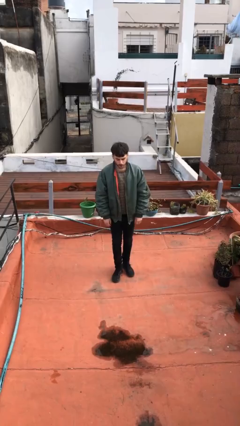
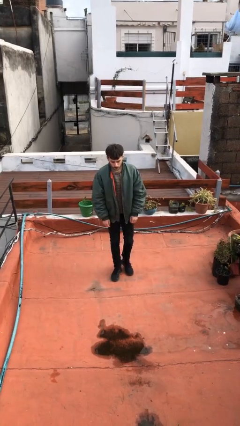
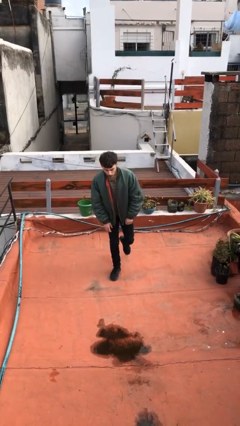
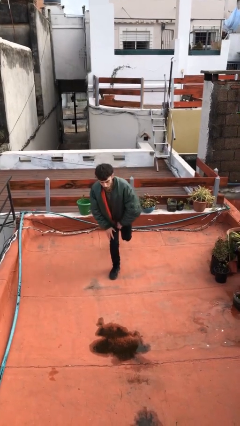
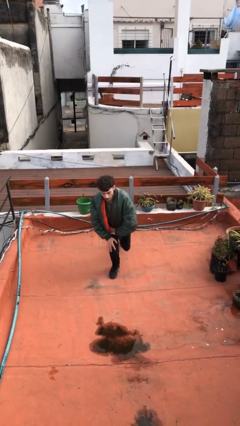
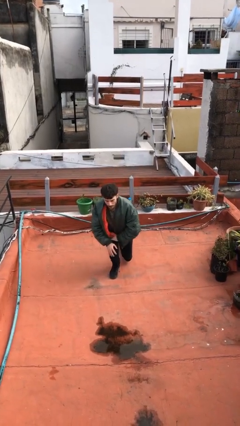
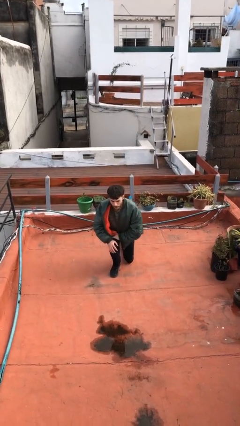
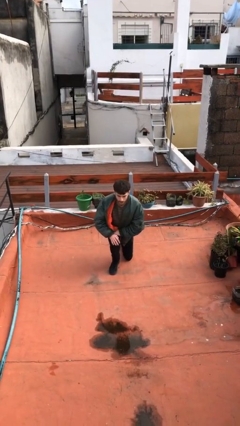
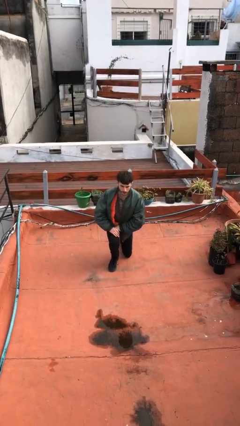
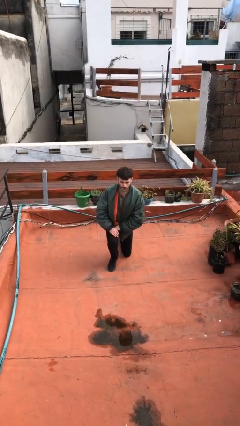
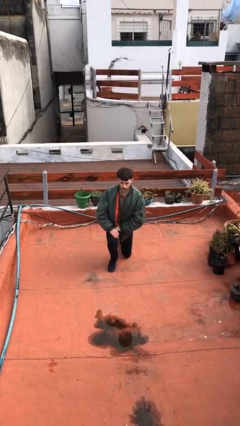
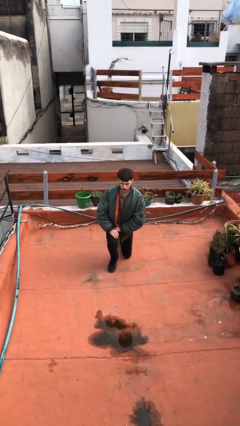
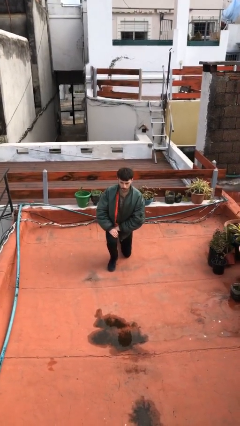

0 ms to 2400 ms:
person kneels

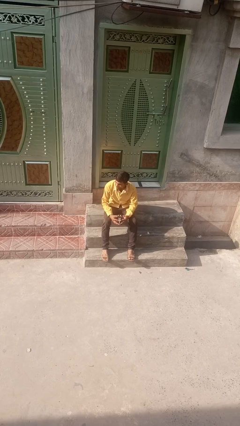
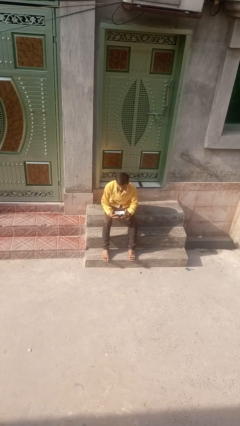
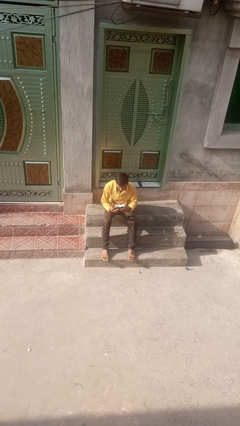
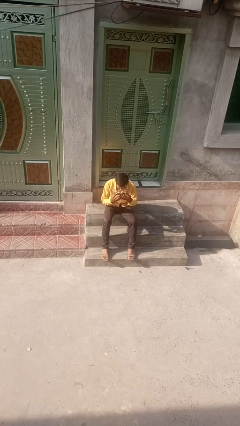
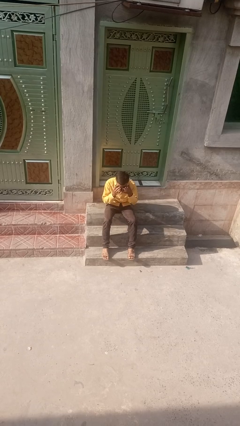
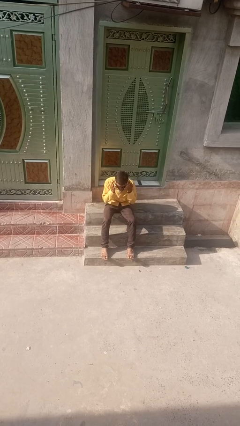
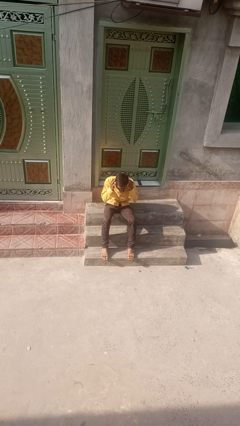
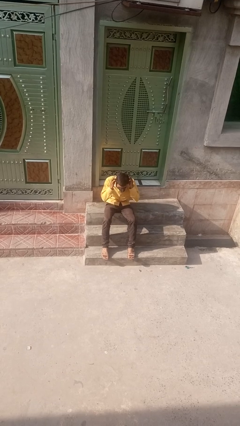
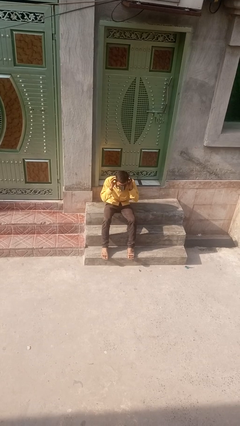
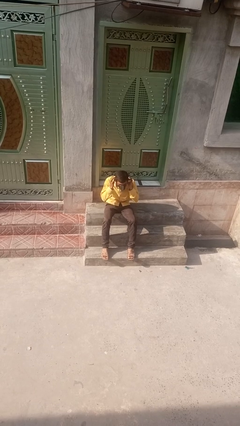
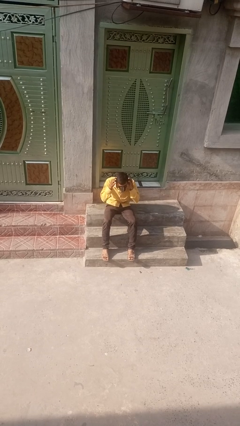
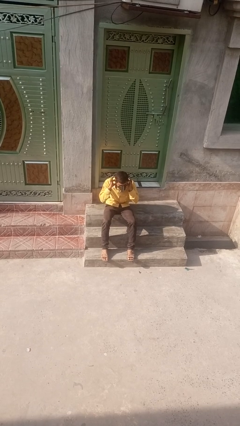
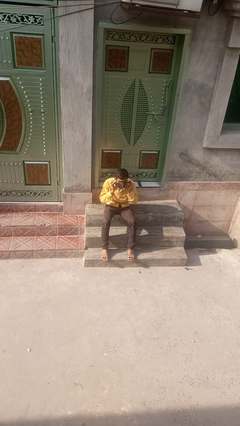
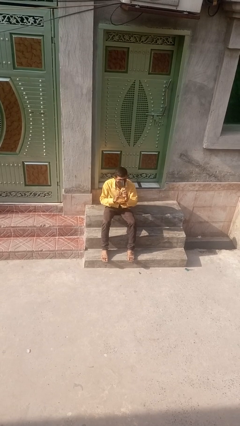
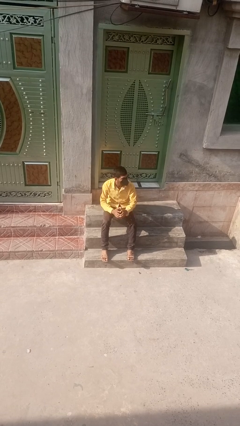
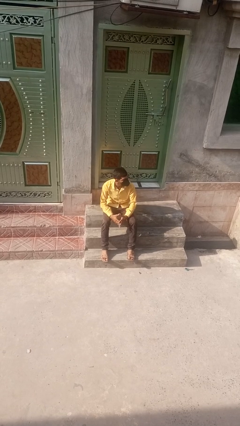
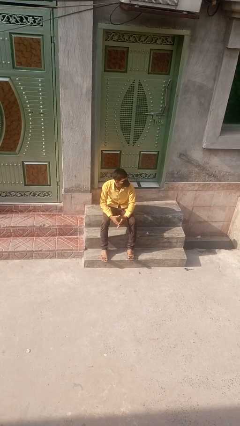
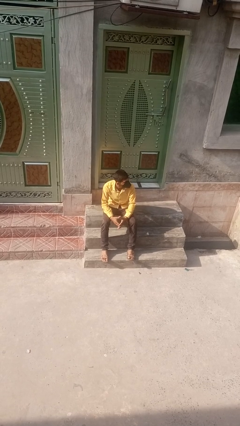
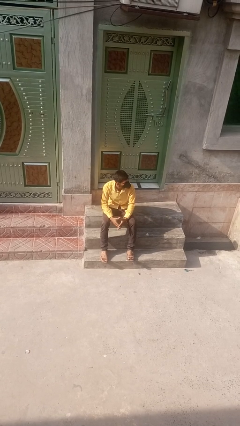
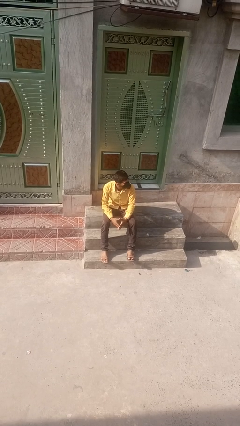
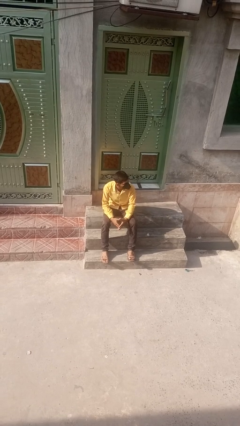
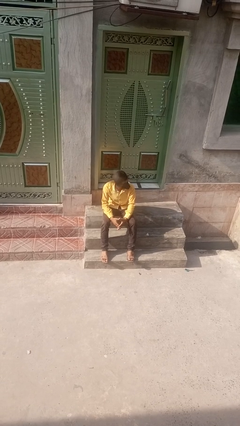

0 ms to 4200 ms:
person puts on facemask

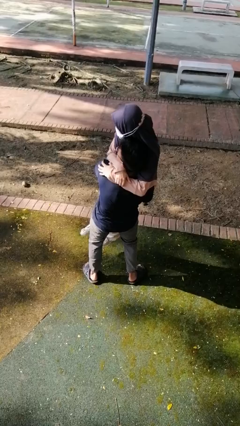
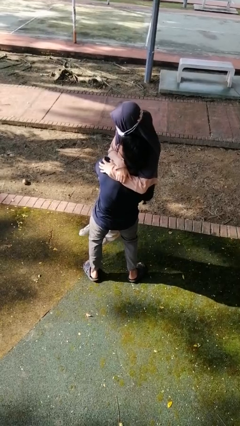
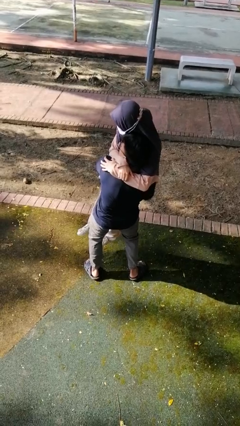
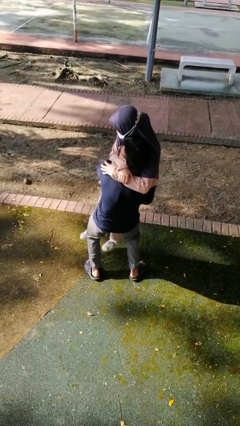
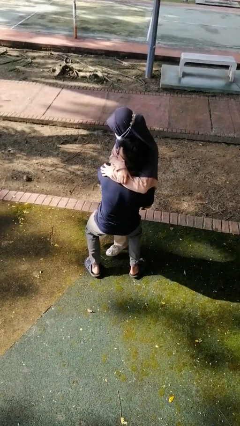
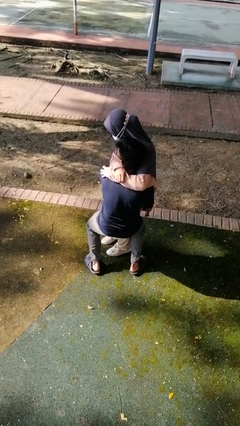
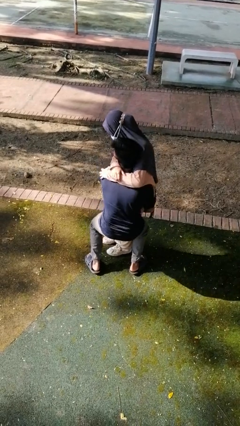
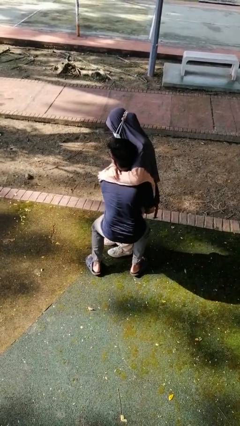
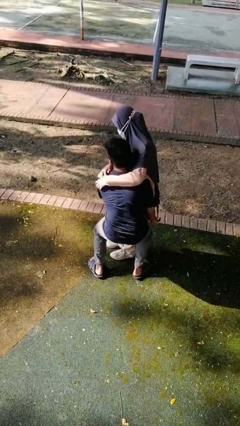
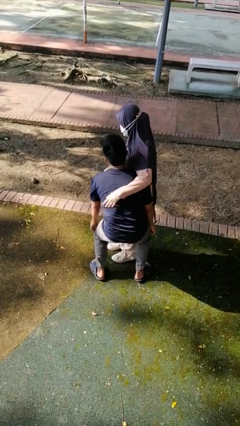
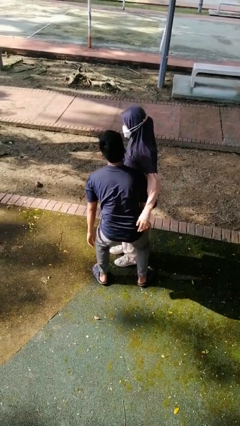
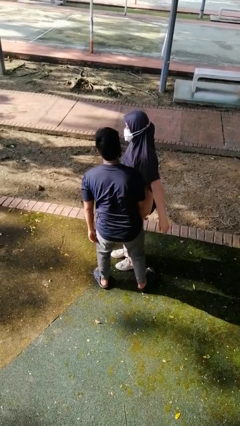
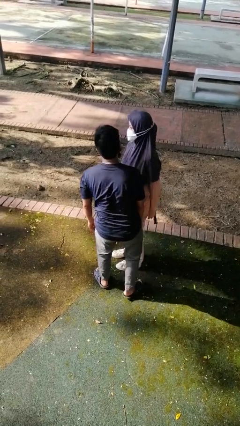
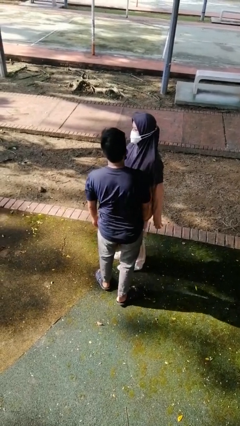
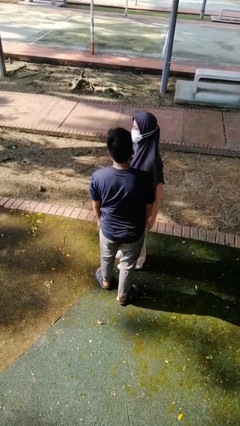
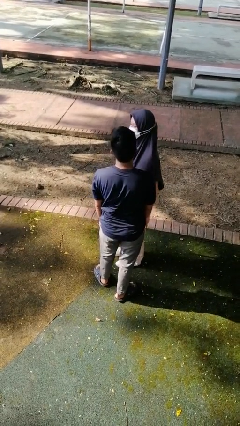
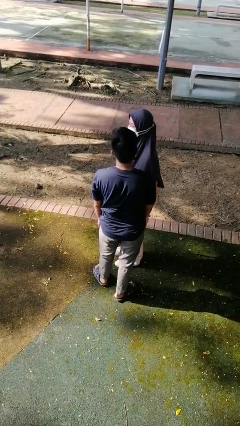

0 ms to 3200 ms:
person puts down person

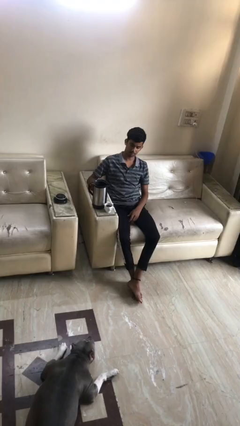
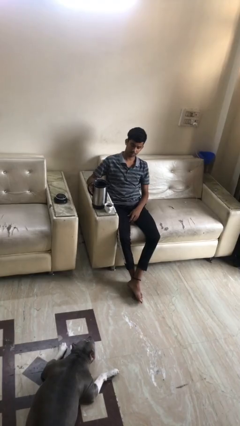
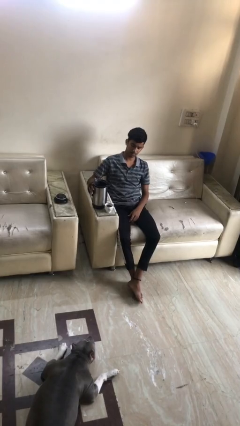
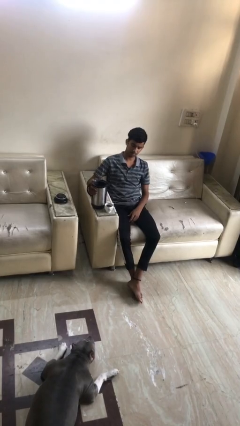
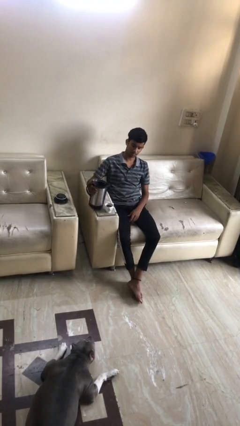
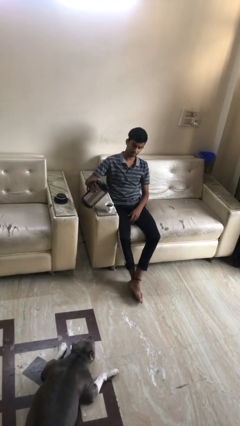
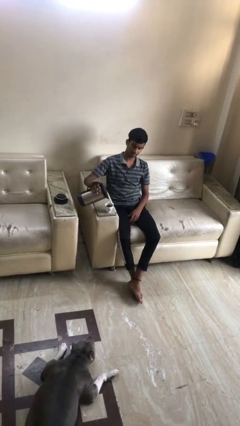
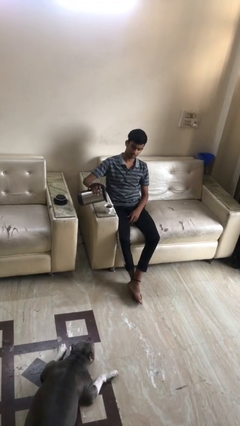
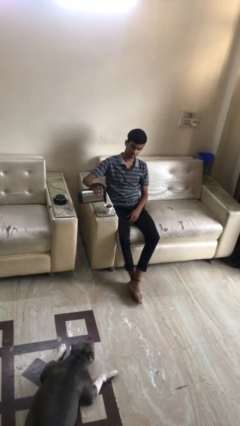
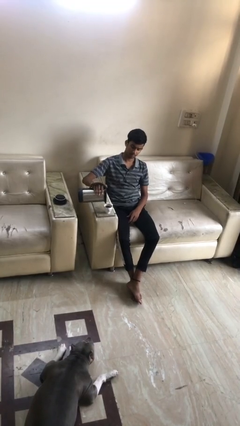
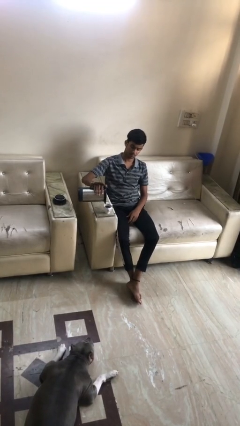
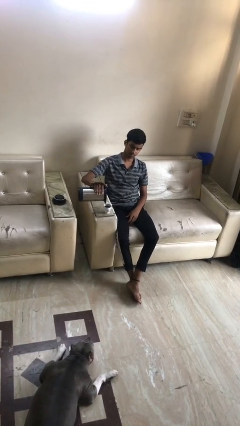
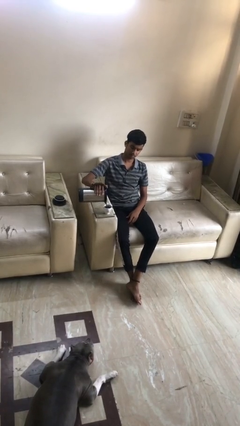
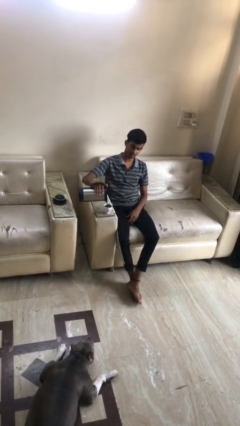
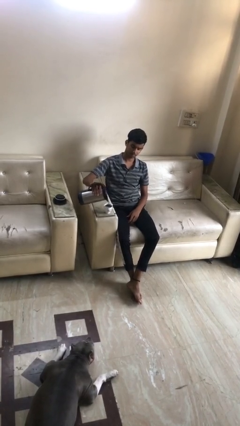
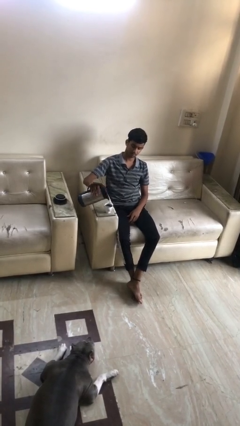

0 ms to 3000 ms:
person pours coffee into mug

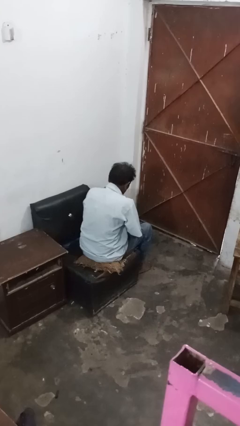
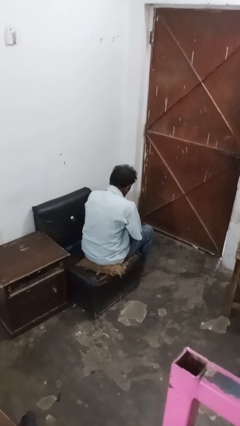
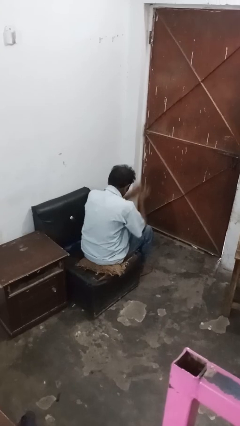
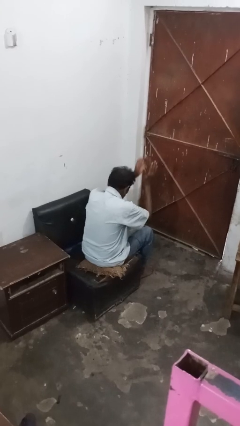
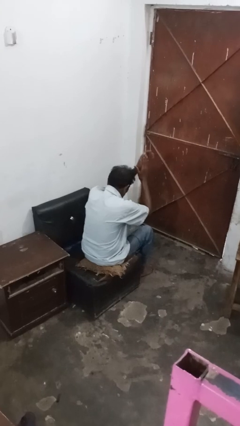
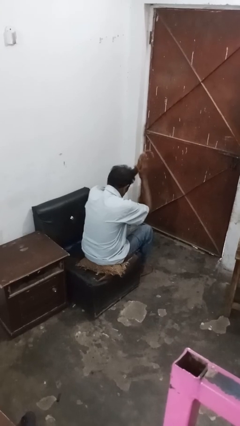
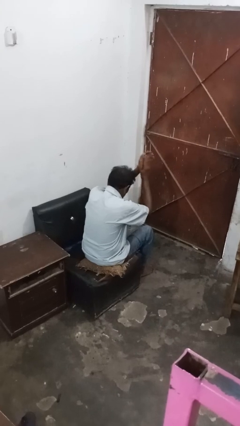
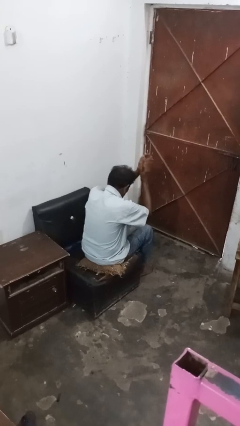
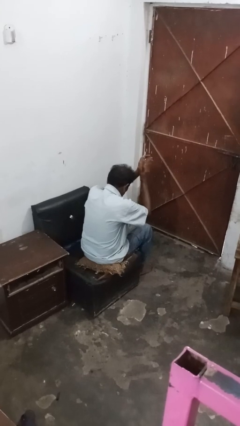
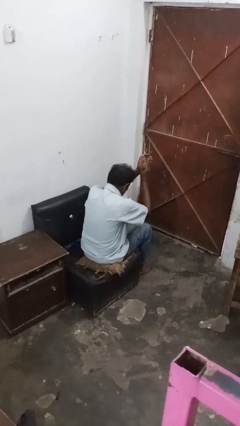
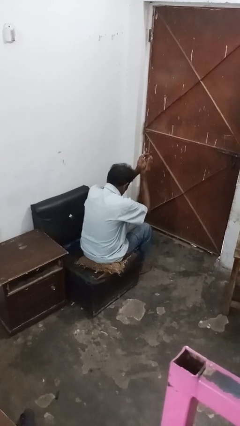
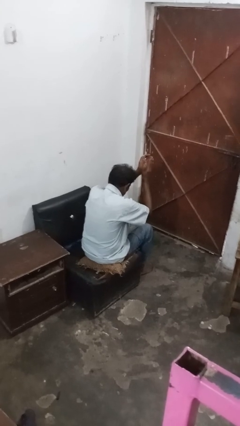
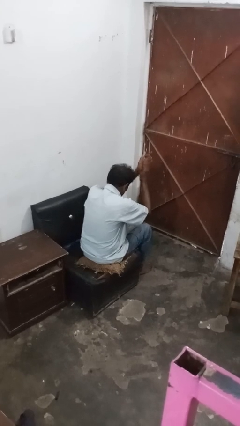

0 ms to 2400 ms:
person claps hands

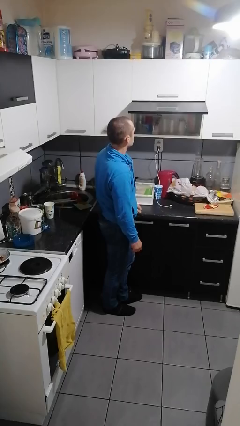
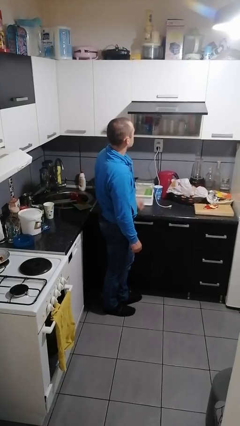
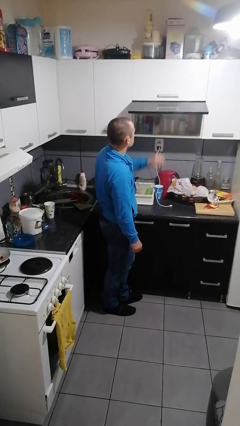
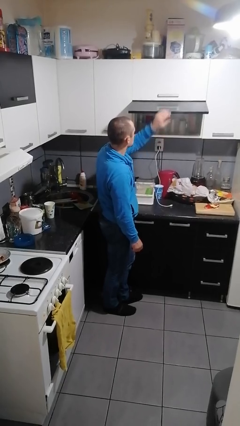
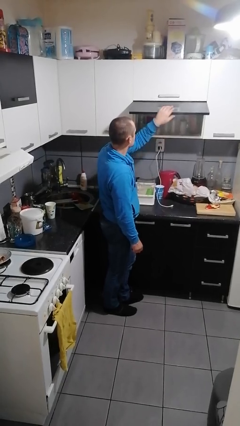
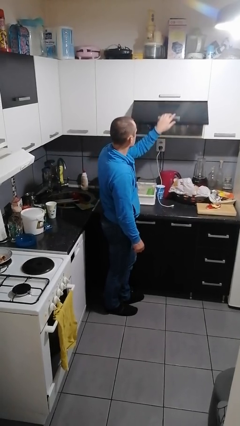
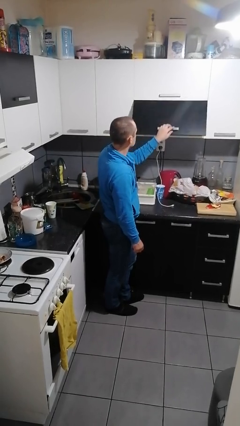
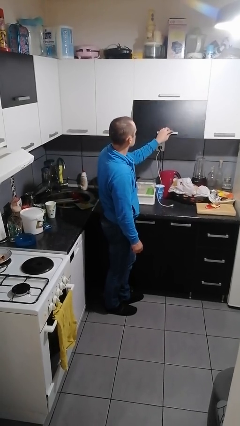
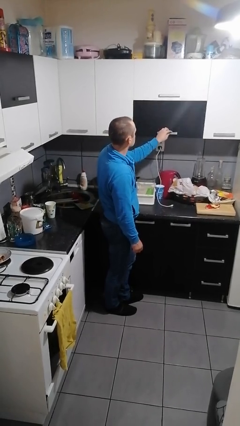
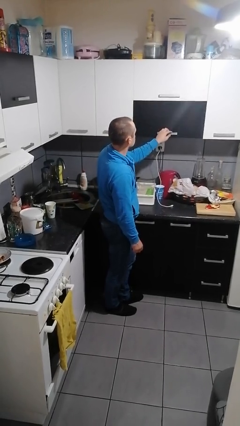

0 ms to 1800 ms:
person closes cabinet

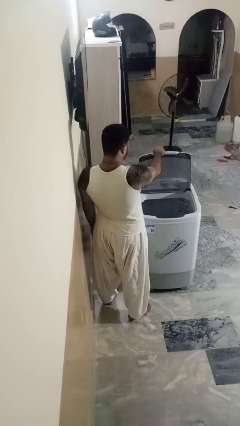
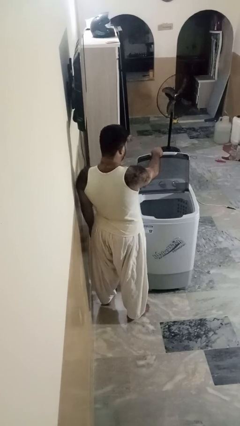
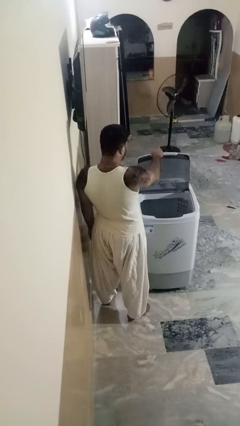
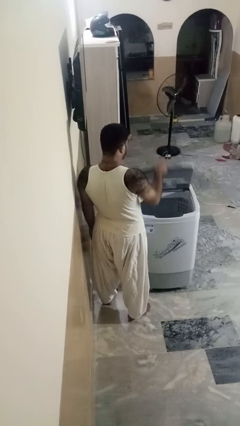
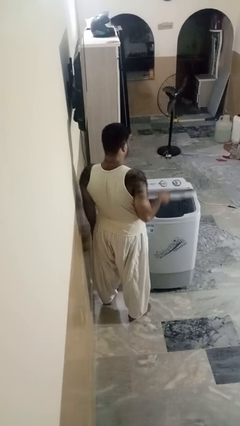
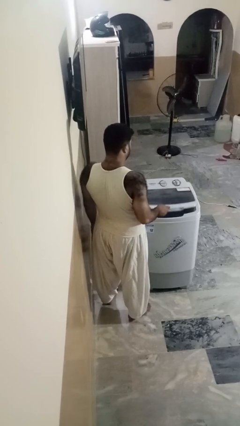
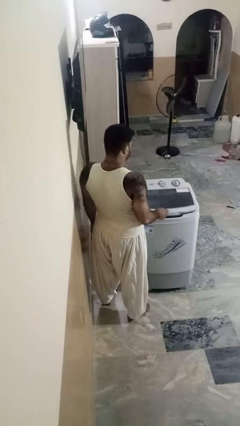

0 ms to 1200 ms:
person closes clothes washer
